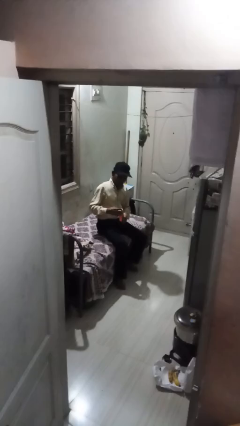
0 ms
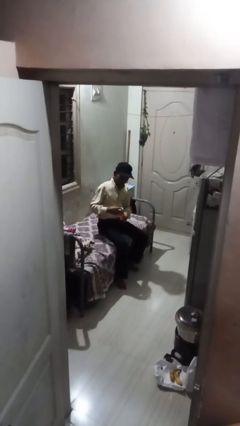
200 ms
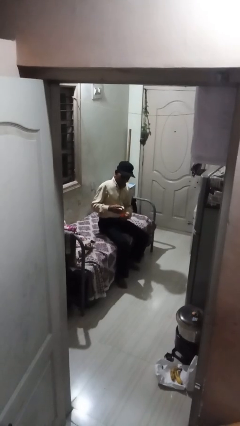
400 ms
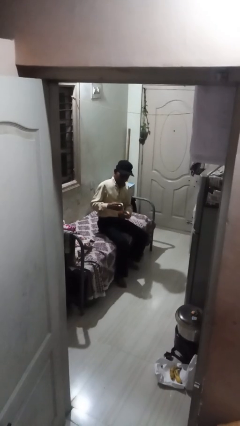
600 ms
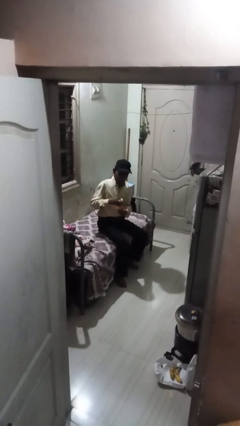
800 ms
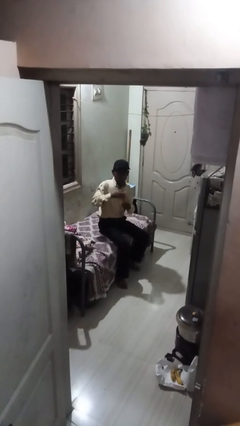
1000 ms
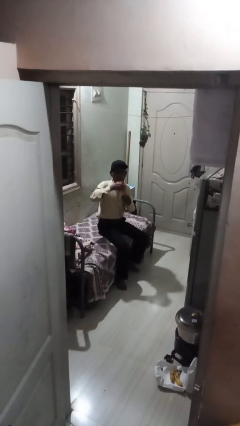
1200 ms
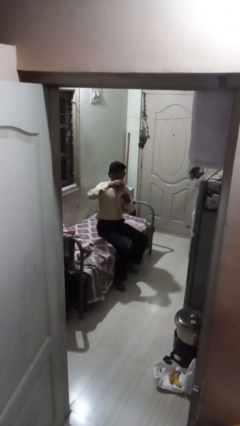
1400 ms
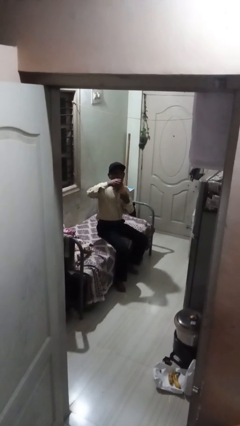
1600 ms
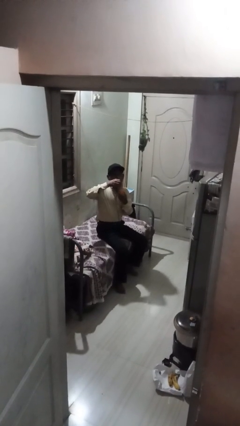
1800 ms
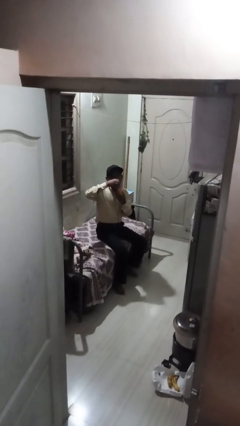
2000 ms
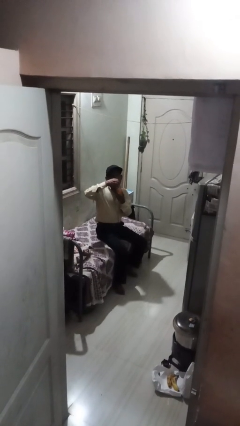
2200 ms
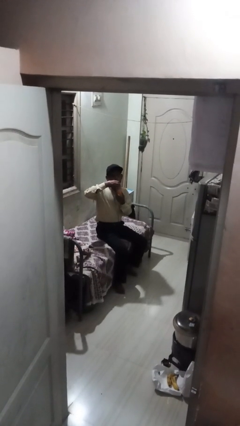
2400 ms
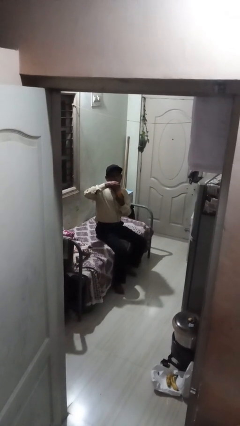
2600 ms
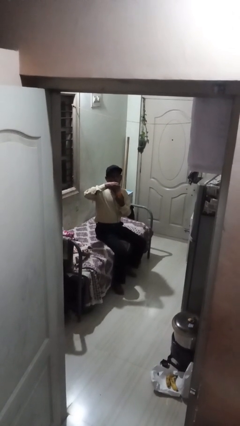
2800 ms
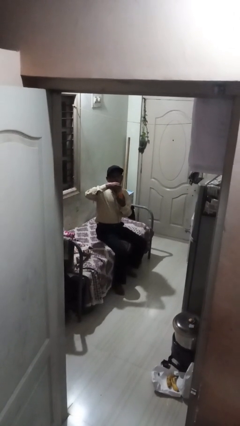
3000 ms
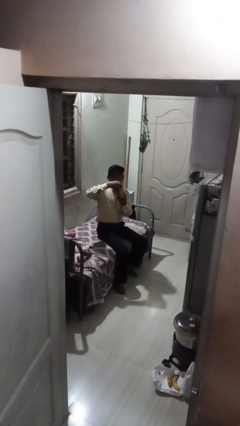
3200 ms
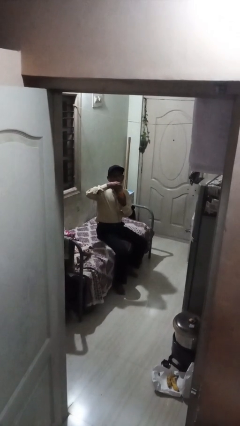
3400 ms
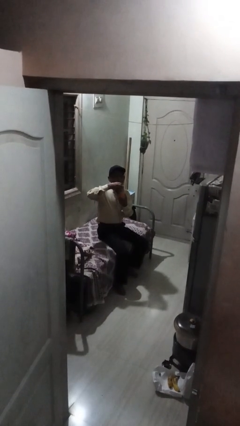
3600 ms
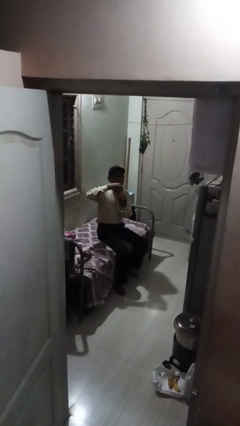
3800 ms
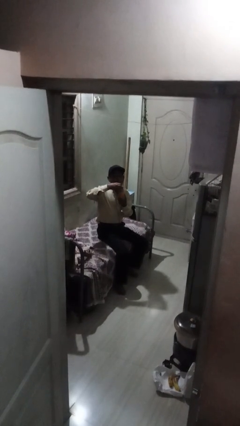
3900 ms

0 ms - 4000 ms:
person opens beverage can

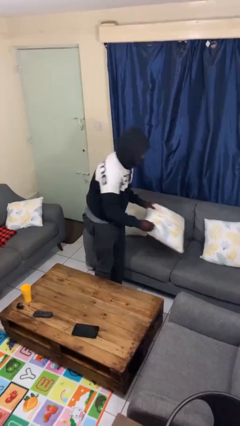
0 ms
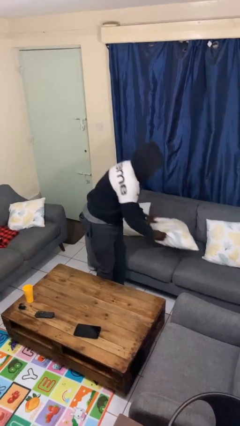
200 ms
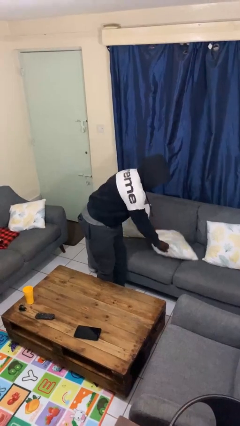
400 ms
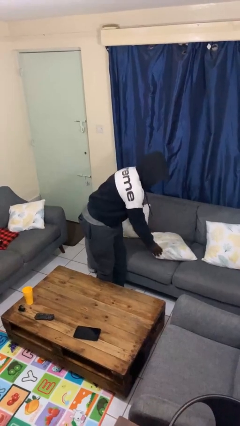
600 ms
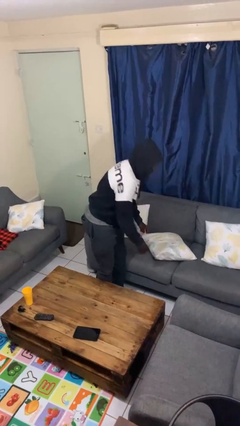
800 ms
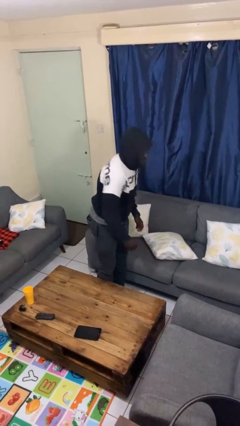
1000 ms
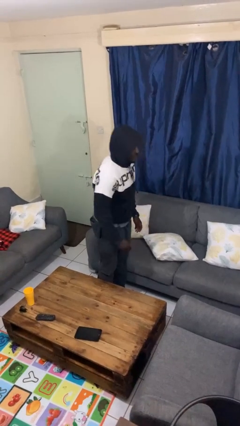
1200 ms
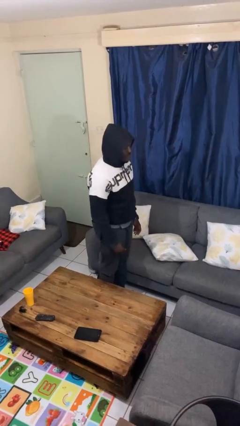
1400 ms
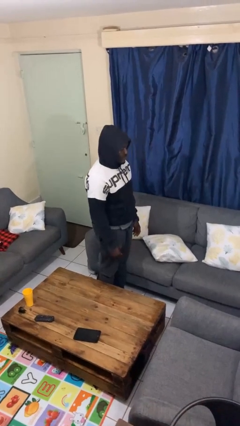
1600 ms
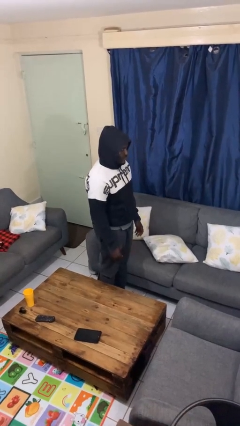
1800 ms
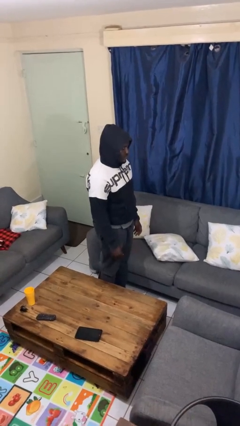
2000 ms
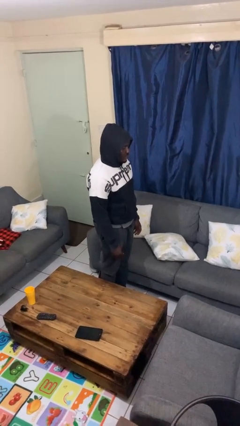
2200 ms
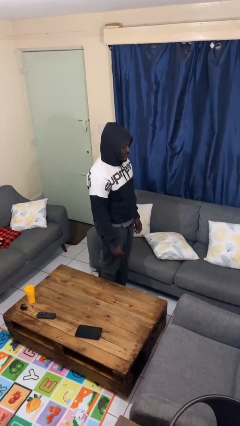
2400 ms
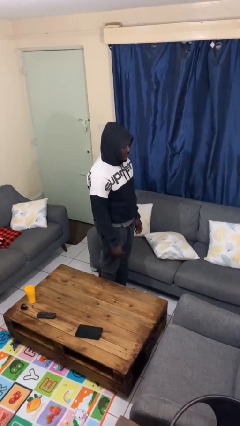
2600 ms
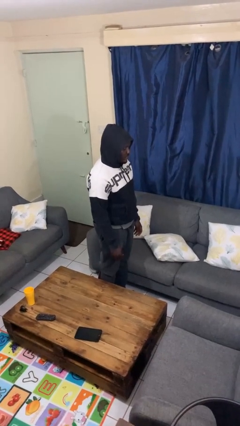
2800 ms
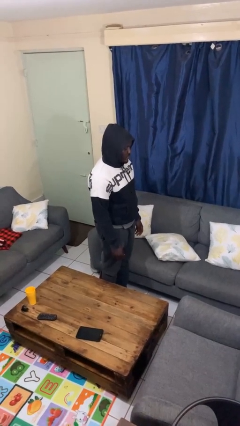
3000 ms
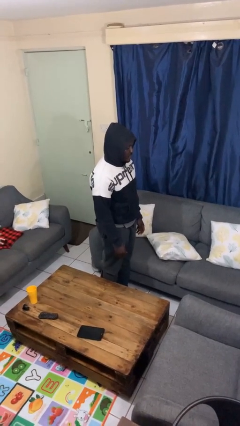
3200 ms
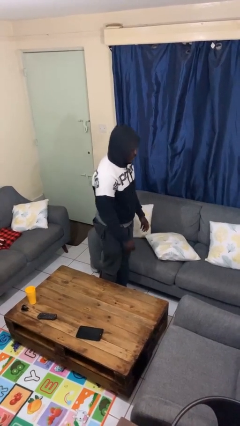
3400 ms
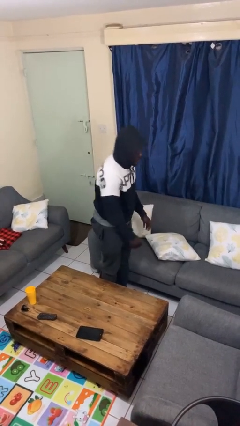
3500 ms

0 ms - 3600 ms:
person puts down object on couch

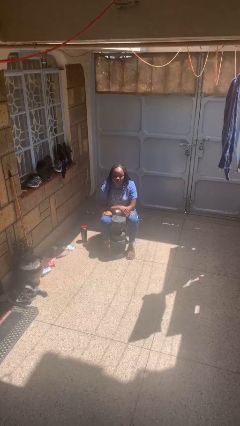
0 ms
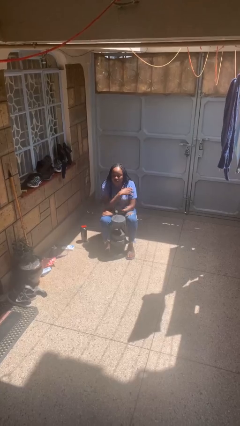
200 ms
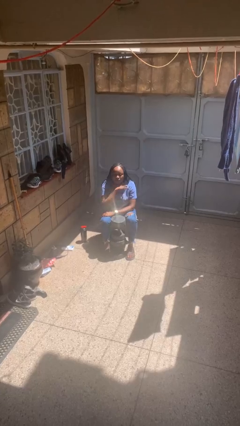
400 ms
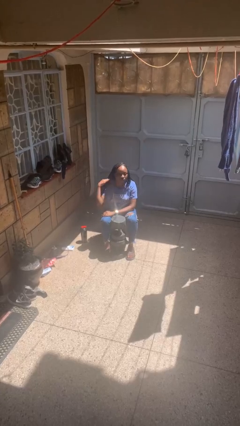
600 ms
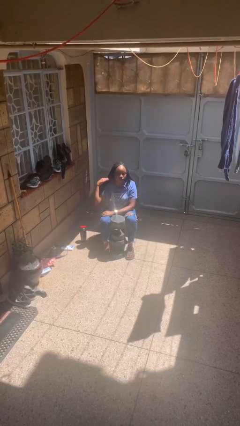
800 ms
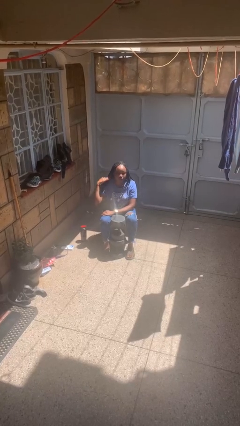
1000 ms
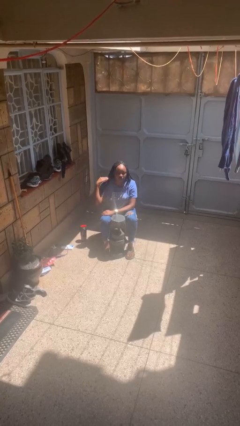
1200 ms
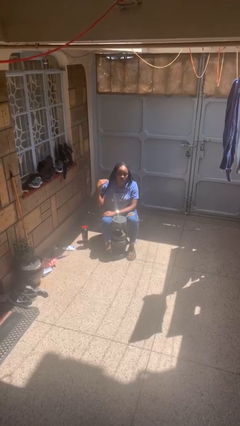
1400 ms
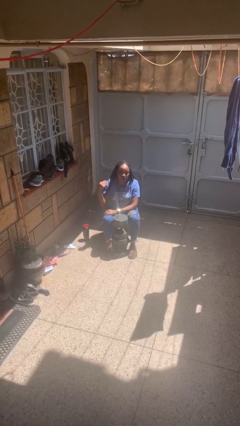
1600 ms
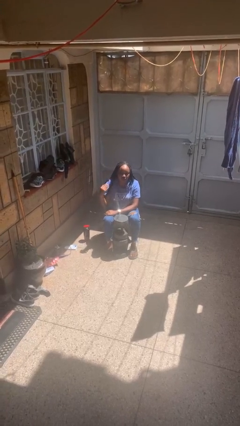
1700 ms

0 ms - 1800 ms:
person gestures cut

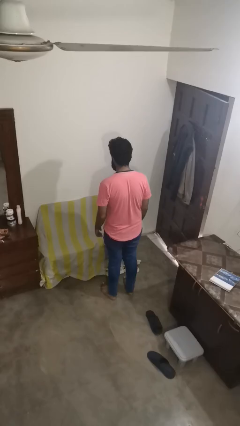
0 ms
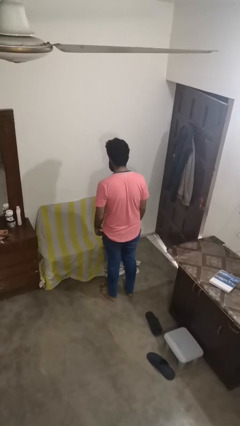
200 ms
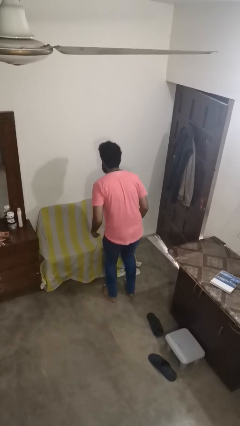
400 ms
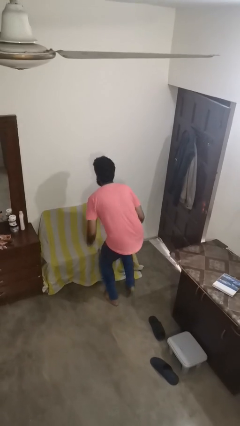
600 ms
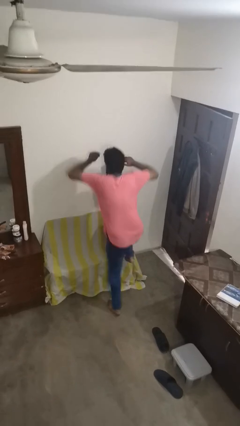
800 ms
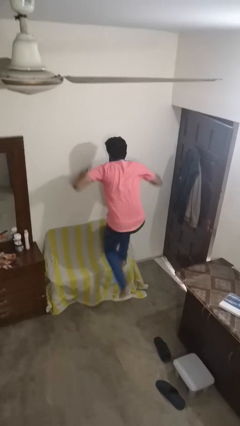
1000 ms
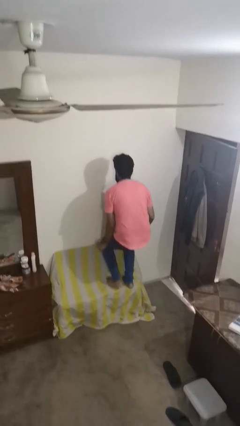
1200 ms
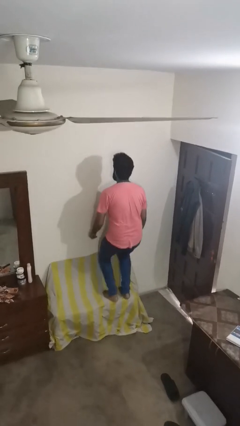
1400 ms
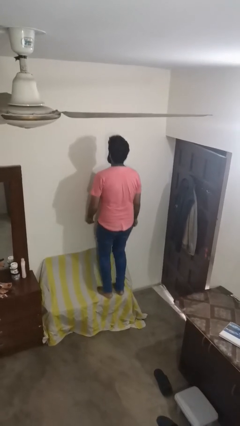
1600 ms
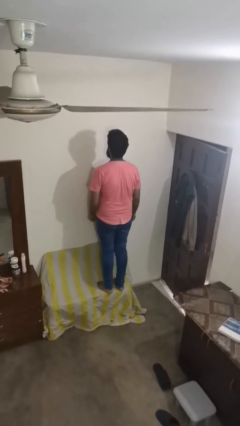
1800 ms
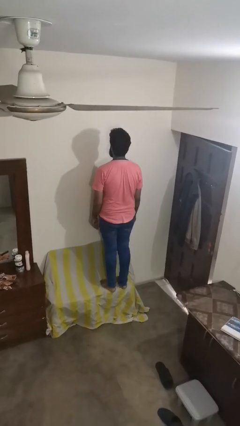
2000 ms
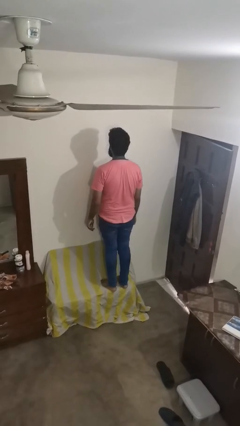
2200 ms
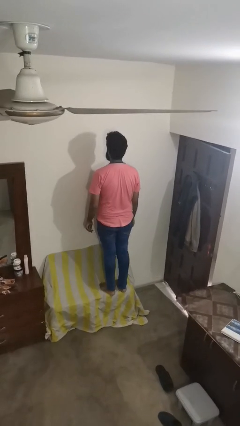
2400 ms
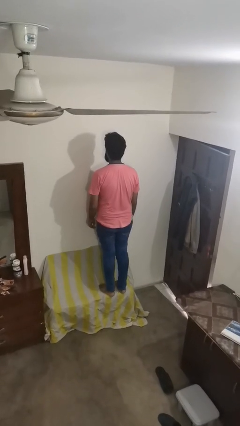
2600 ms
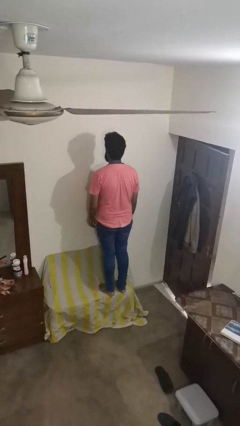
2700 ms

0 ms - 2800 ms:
person jumps on couch

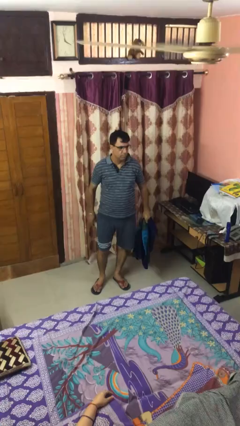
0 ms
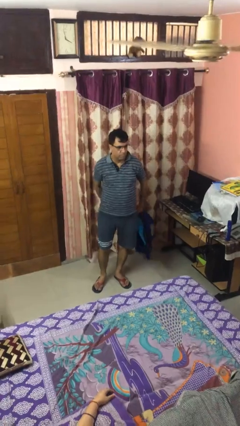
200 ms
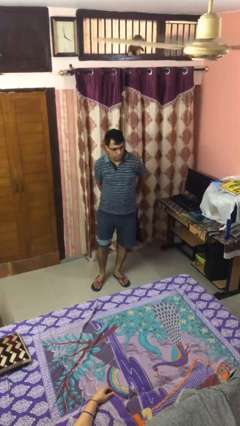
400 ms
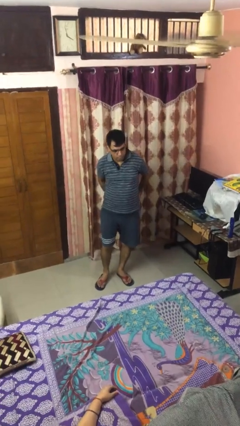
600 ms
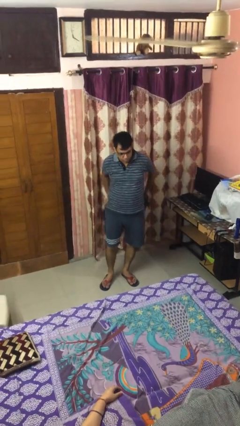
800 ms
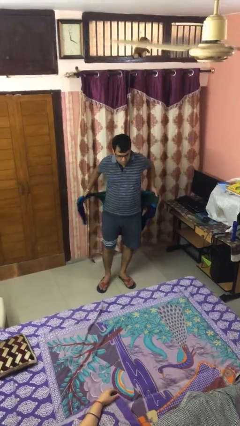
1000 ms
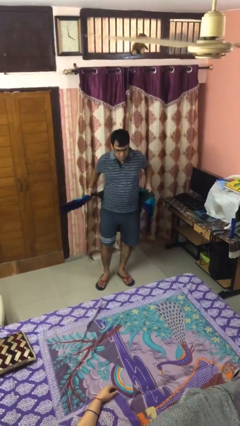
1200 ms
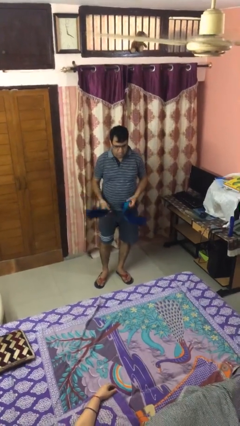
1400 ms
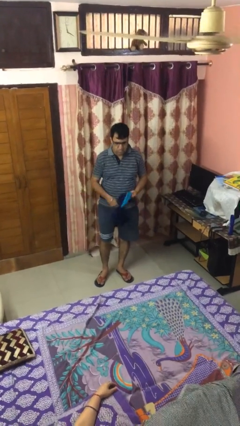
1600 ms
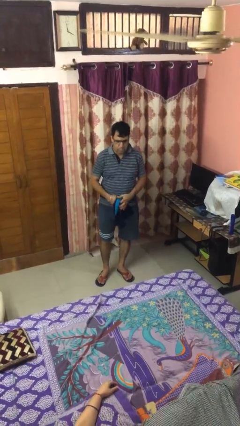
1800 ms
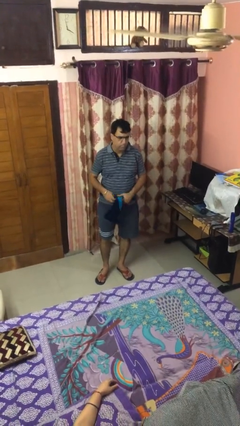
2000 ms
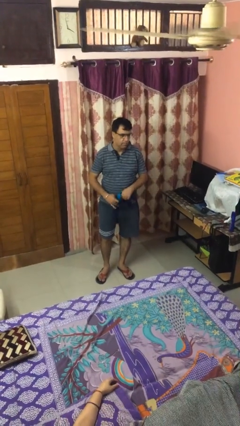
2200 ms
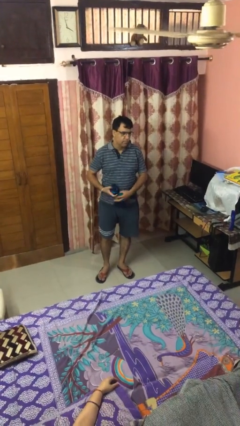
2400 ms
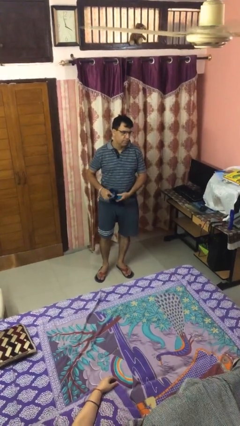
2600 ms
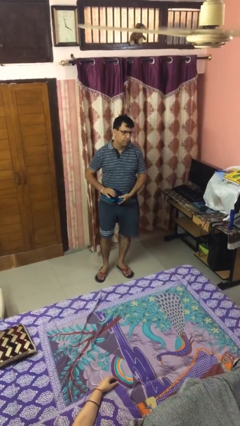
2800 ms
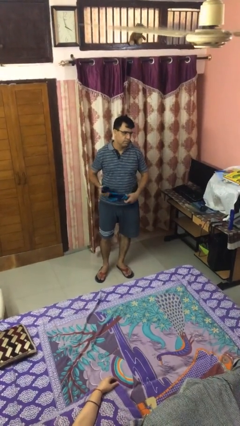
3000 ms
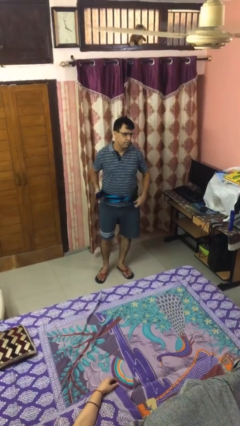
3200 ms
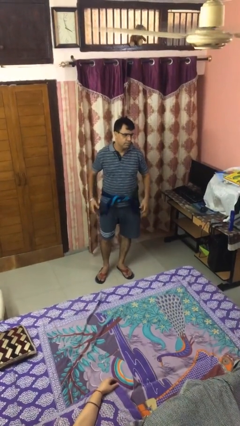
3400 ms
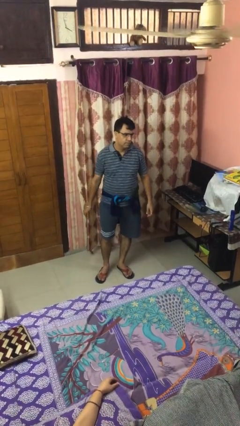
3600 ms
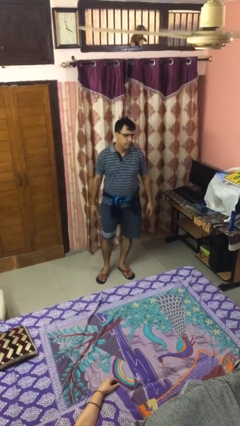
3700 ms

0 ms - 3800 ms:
person ties jacket around waist

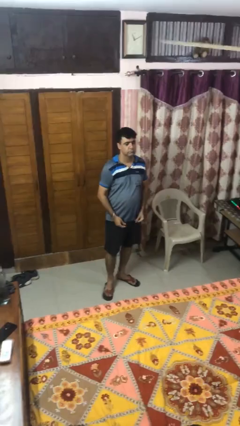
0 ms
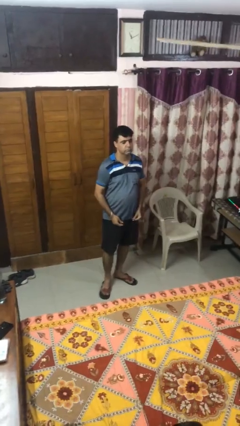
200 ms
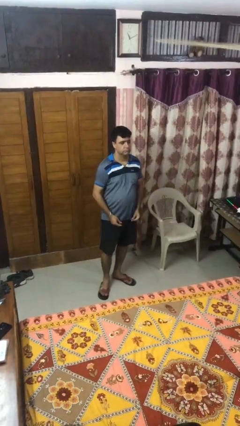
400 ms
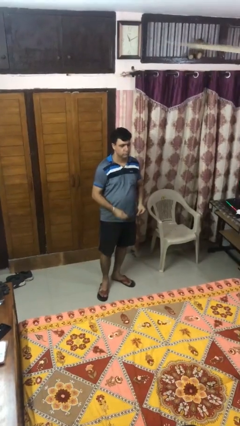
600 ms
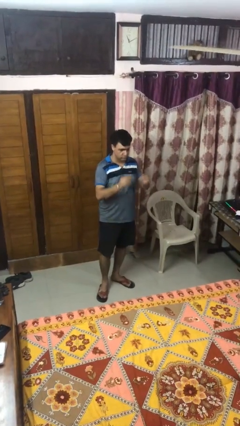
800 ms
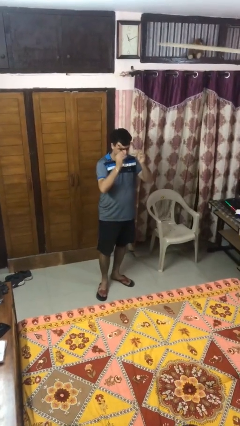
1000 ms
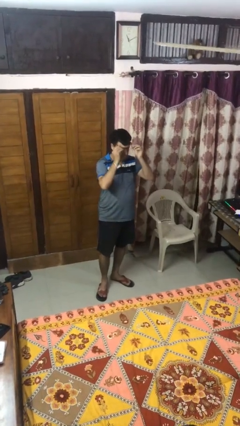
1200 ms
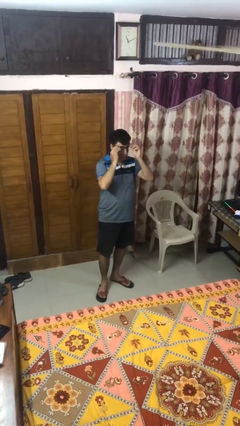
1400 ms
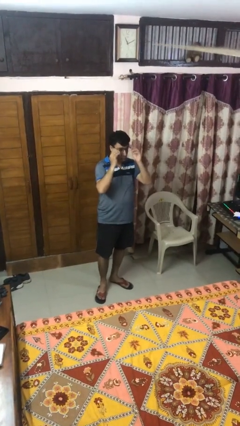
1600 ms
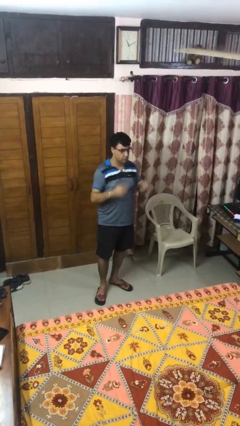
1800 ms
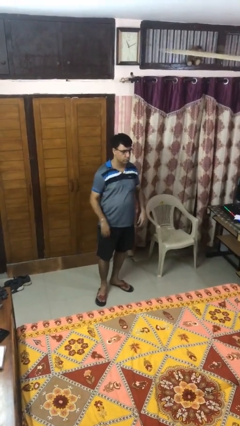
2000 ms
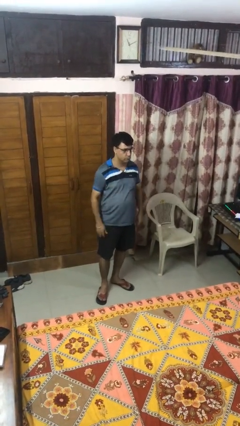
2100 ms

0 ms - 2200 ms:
person puts on glasses
